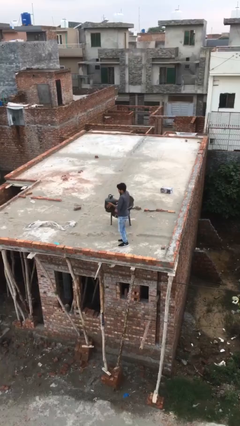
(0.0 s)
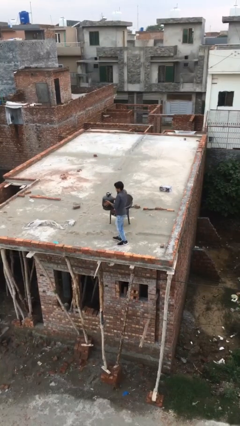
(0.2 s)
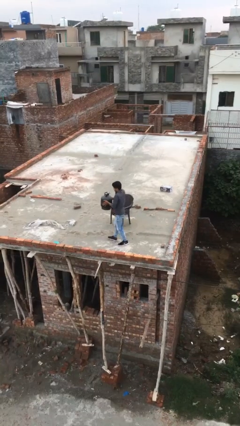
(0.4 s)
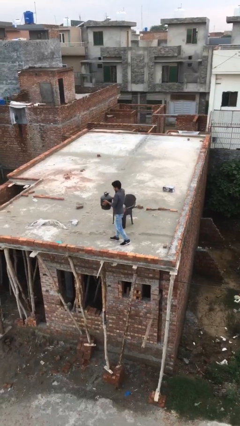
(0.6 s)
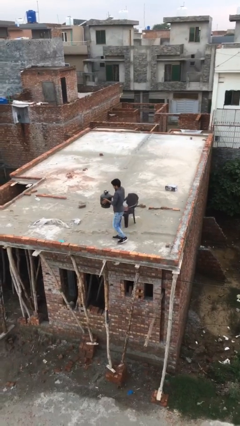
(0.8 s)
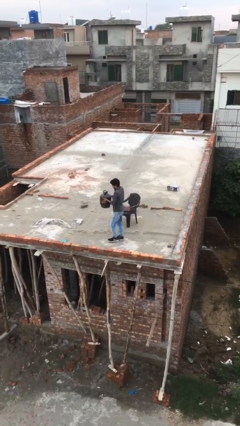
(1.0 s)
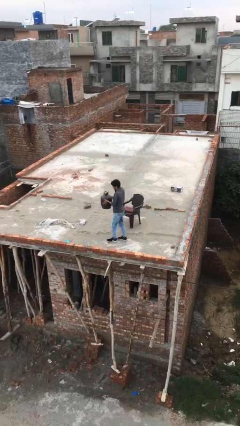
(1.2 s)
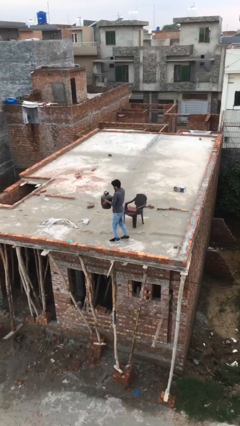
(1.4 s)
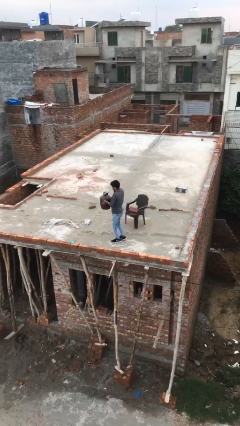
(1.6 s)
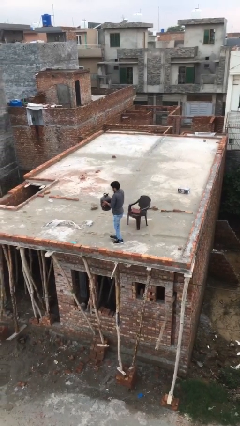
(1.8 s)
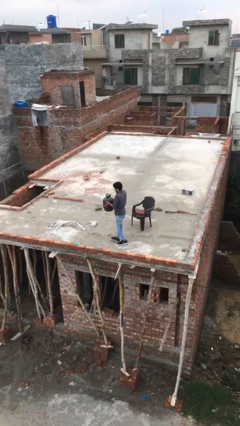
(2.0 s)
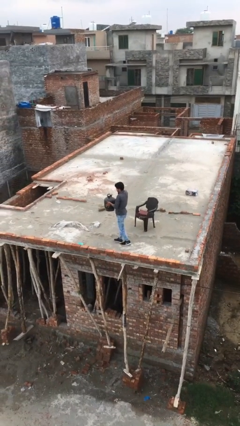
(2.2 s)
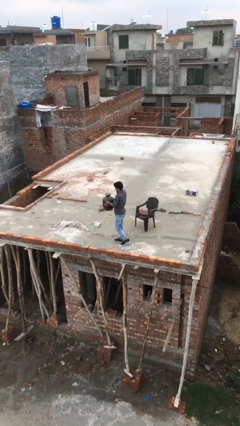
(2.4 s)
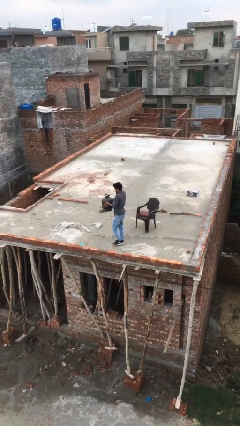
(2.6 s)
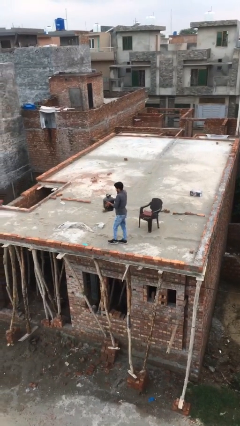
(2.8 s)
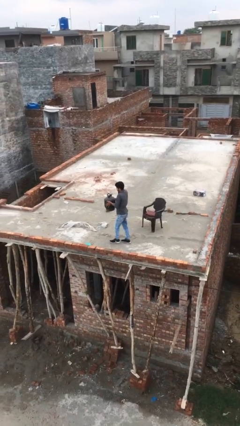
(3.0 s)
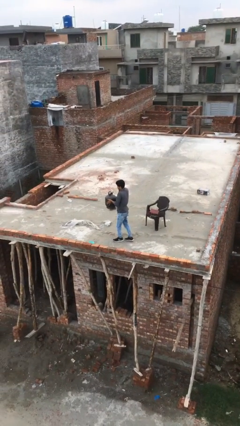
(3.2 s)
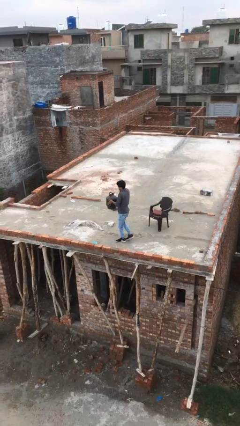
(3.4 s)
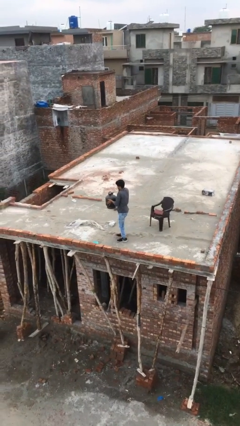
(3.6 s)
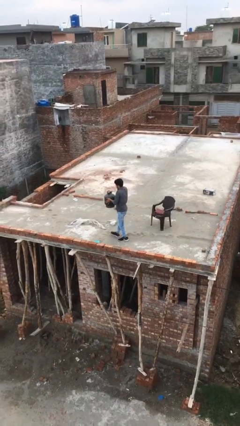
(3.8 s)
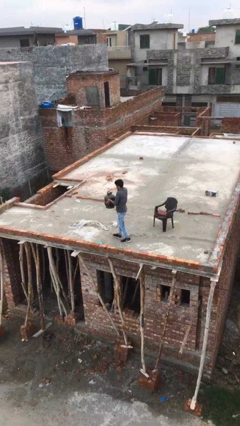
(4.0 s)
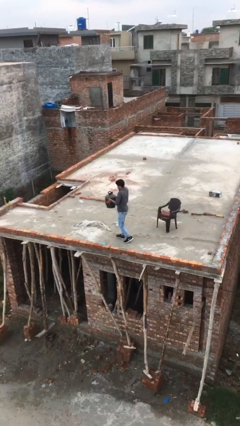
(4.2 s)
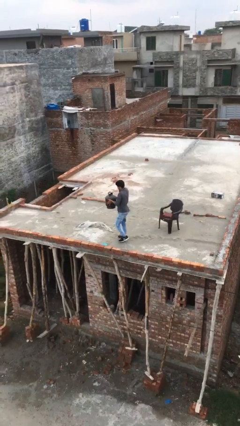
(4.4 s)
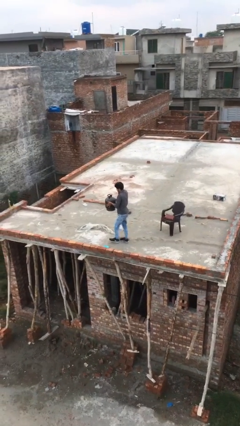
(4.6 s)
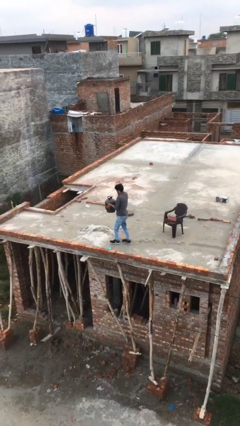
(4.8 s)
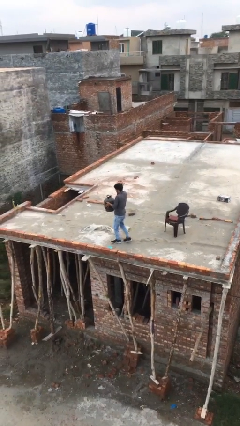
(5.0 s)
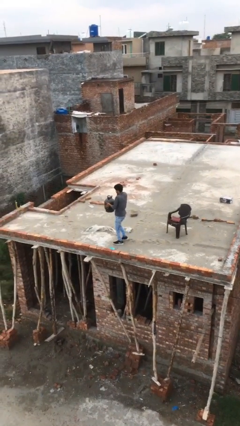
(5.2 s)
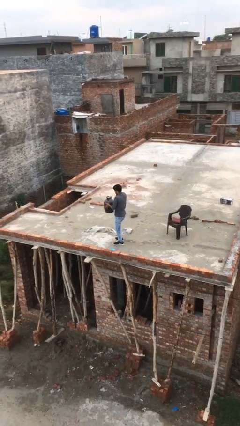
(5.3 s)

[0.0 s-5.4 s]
person carries heavy object

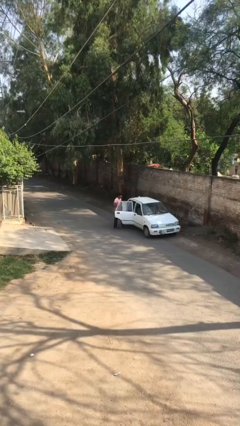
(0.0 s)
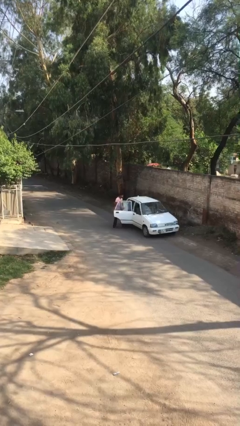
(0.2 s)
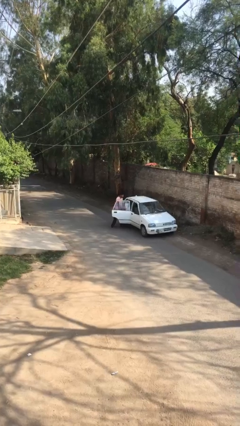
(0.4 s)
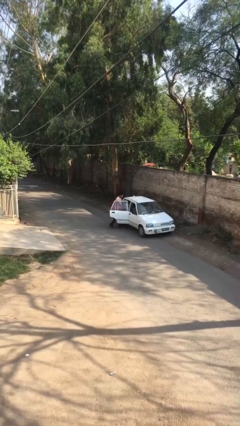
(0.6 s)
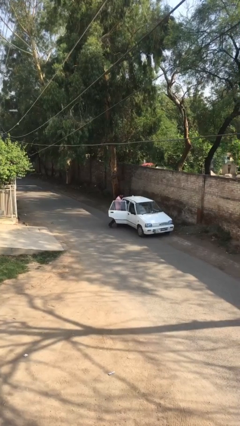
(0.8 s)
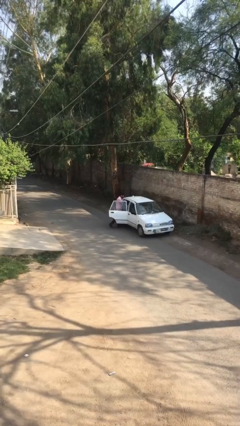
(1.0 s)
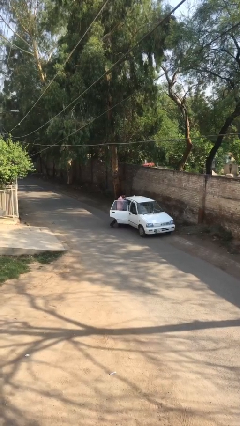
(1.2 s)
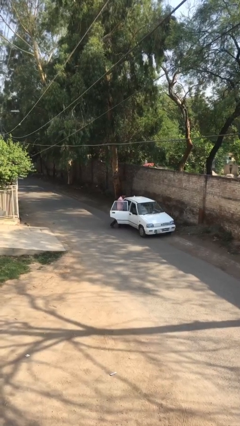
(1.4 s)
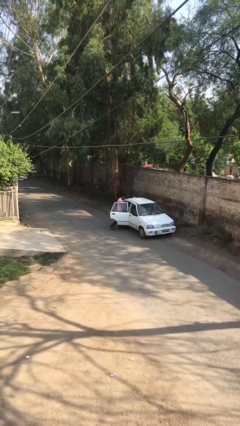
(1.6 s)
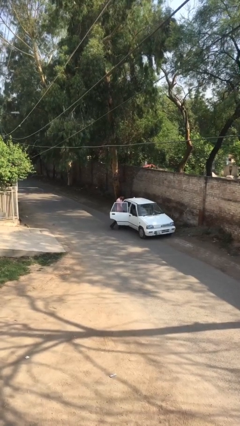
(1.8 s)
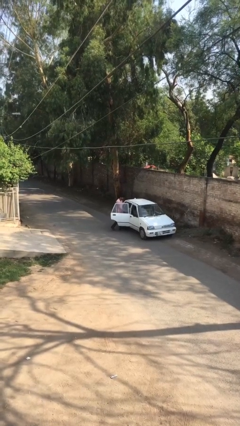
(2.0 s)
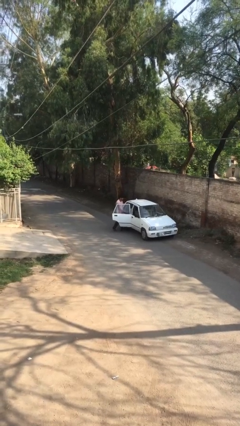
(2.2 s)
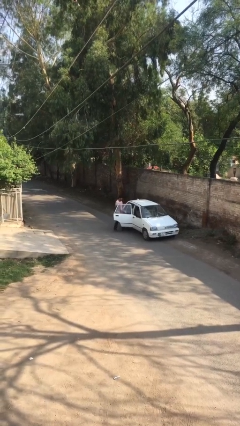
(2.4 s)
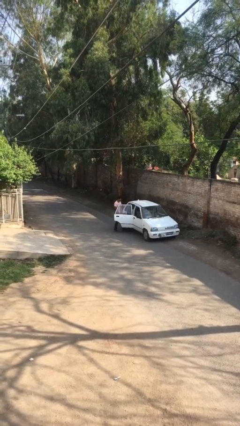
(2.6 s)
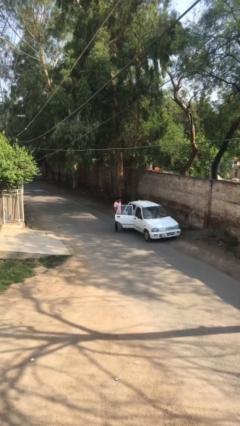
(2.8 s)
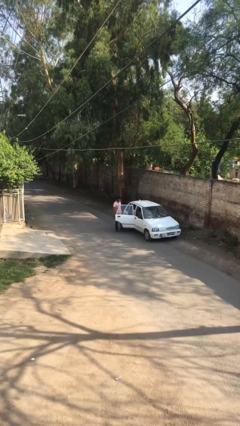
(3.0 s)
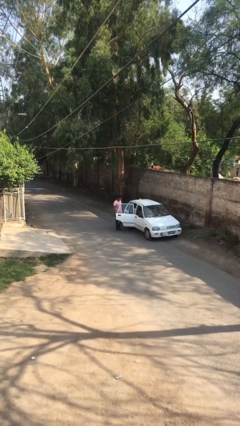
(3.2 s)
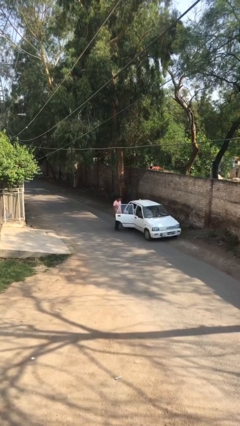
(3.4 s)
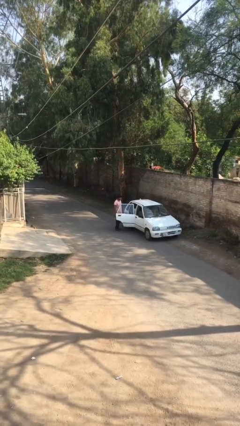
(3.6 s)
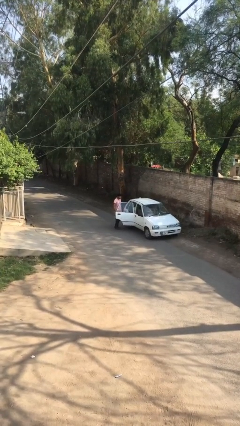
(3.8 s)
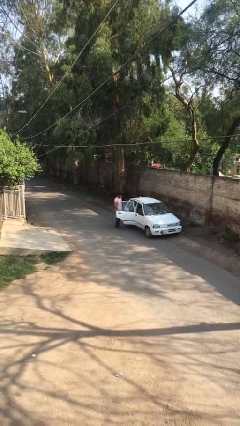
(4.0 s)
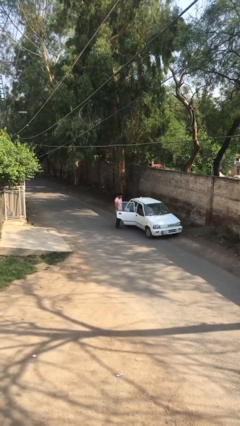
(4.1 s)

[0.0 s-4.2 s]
person loads car

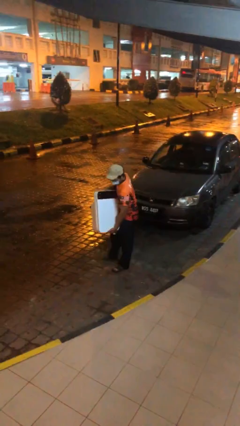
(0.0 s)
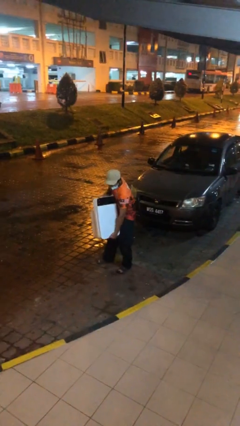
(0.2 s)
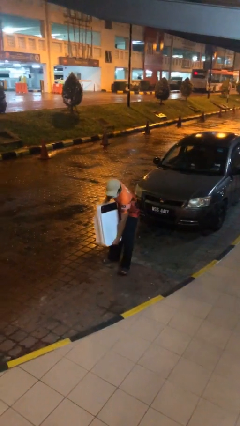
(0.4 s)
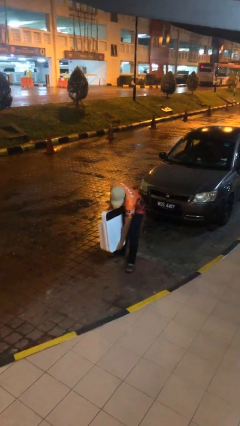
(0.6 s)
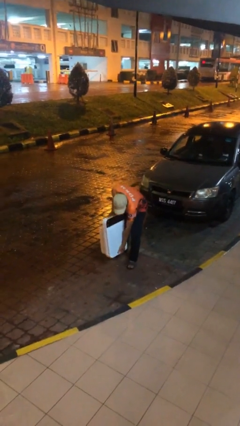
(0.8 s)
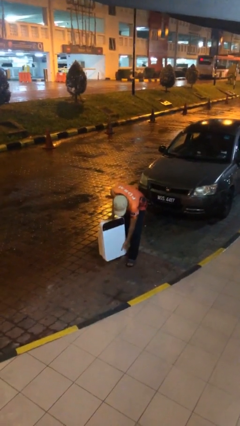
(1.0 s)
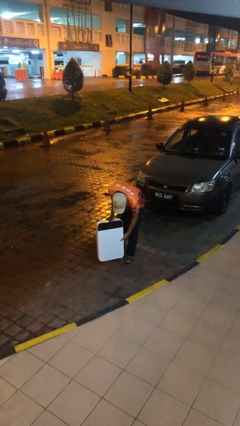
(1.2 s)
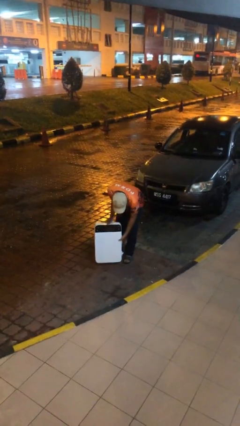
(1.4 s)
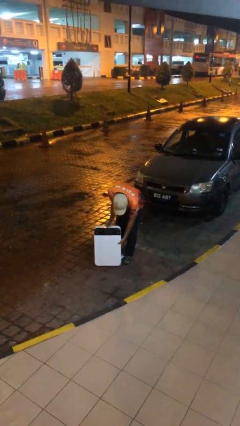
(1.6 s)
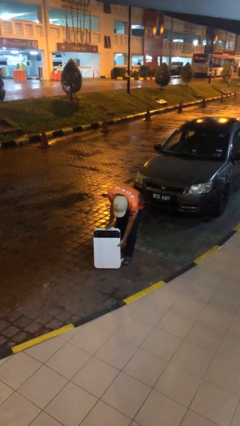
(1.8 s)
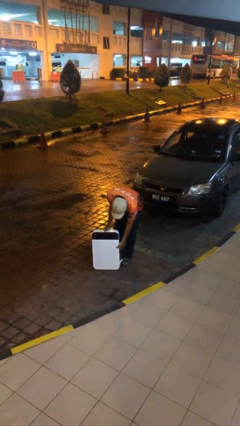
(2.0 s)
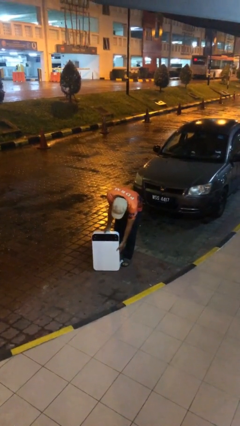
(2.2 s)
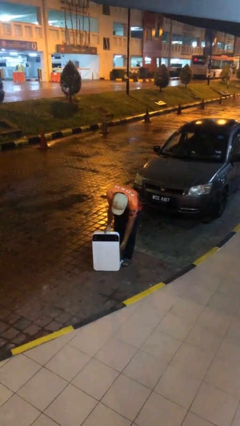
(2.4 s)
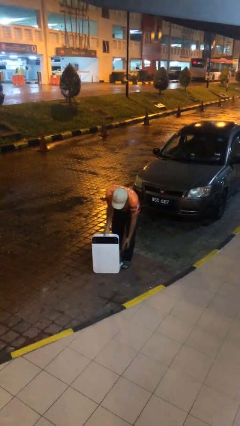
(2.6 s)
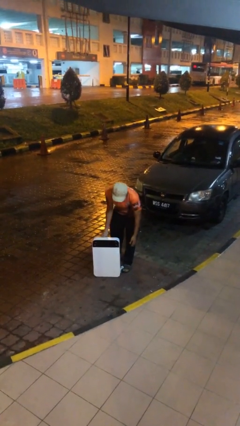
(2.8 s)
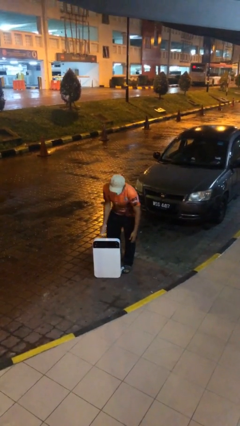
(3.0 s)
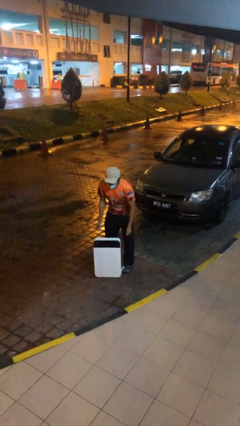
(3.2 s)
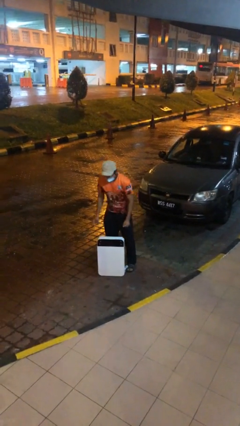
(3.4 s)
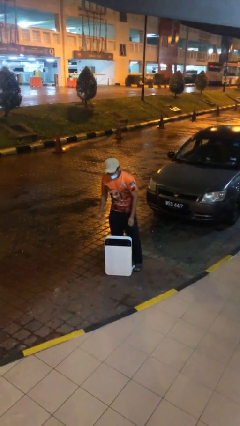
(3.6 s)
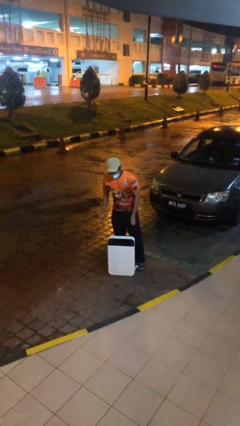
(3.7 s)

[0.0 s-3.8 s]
person puts down object on floor

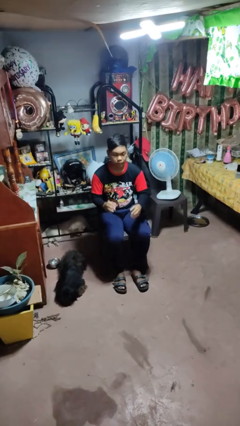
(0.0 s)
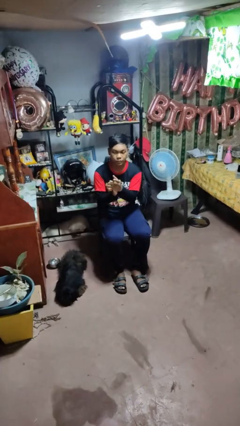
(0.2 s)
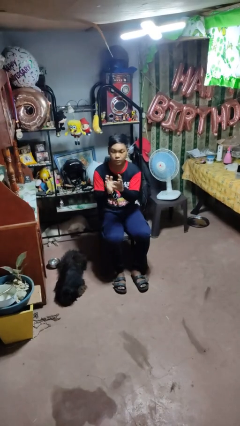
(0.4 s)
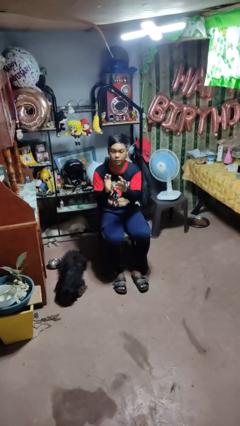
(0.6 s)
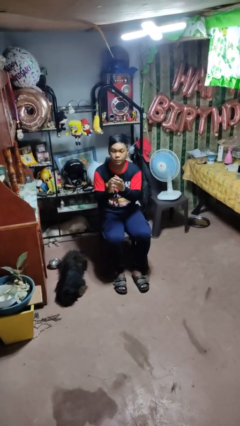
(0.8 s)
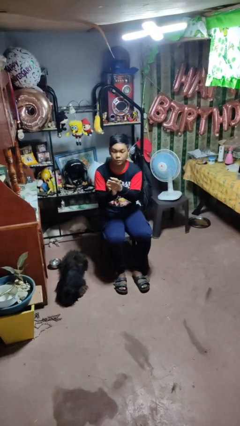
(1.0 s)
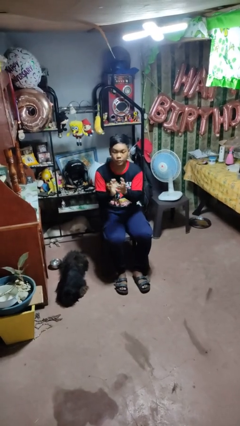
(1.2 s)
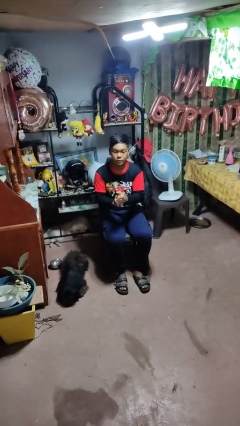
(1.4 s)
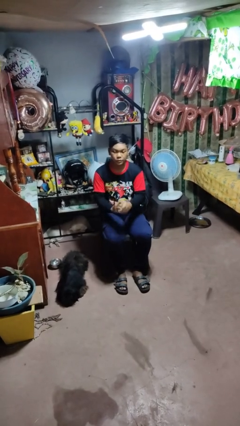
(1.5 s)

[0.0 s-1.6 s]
person claps hands

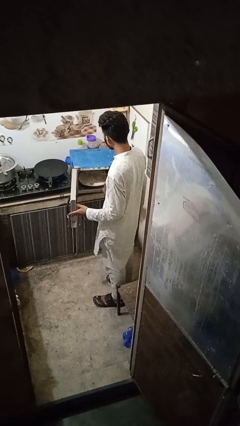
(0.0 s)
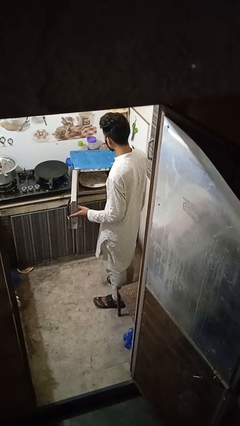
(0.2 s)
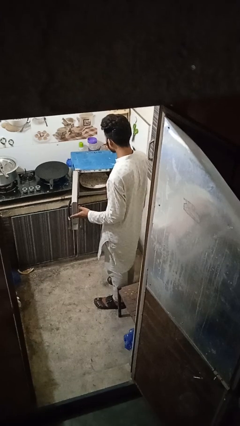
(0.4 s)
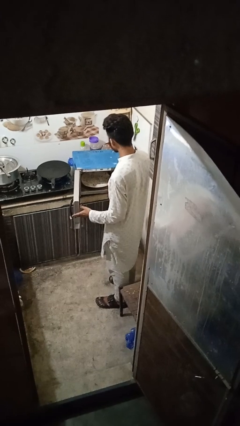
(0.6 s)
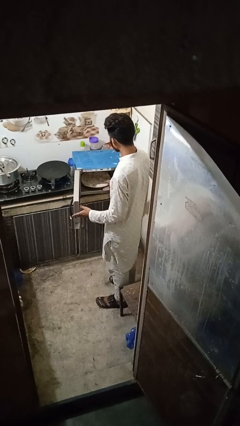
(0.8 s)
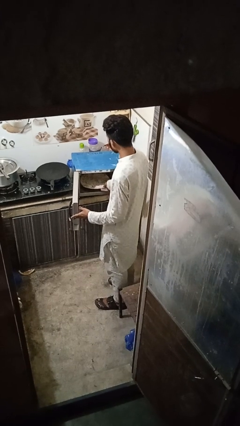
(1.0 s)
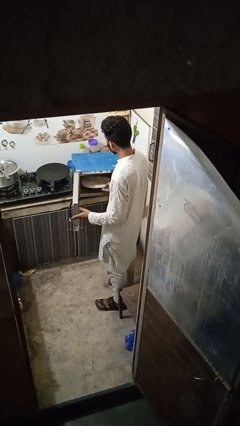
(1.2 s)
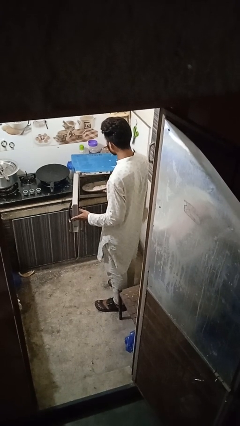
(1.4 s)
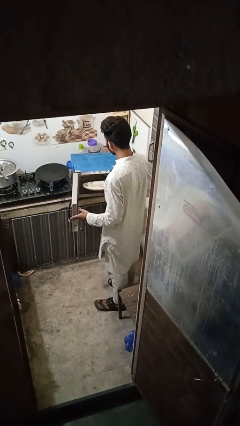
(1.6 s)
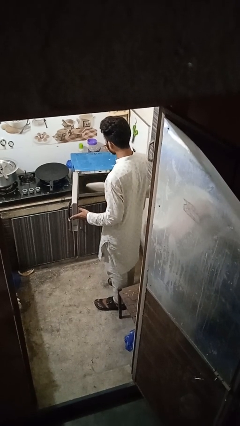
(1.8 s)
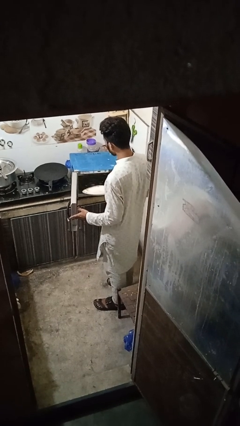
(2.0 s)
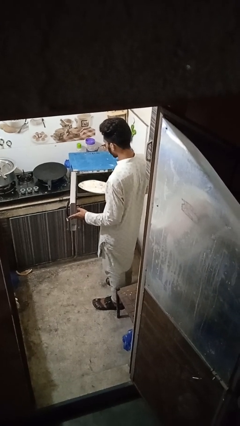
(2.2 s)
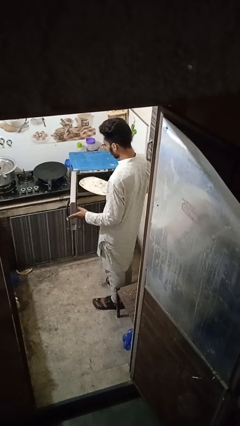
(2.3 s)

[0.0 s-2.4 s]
person takes object from oven

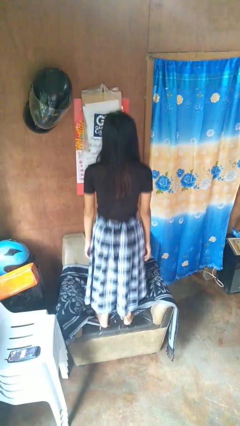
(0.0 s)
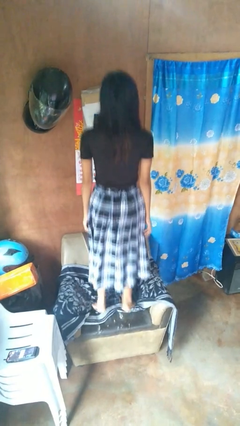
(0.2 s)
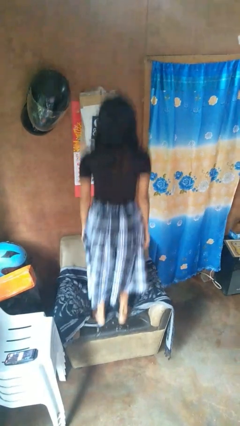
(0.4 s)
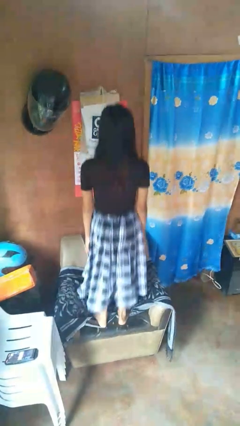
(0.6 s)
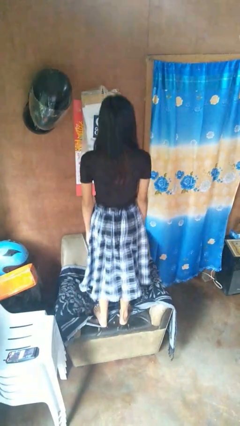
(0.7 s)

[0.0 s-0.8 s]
person jumps on couch
